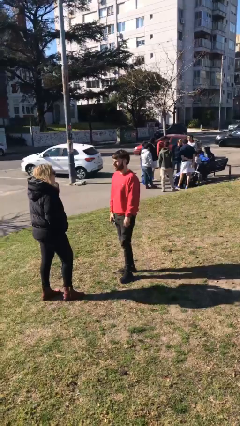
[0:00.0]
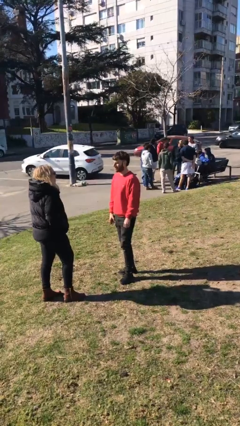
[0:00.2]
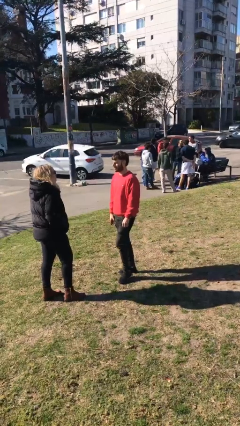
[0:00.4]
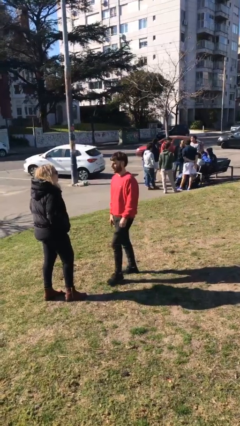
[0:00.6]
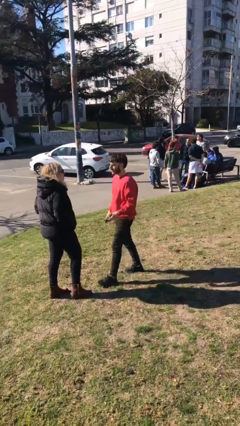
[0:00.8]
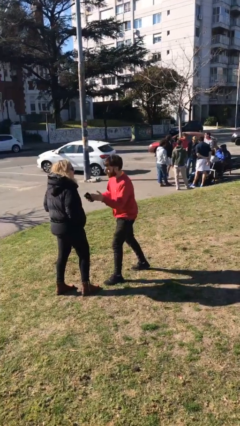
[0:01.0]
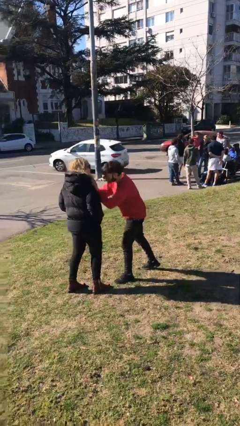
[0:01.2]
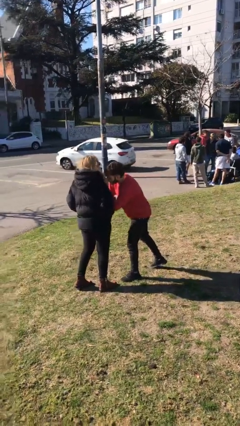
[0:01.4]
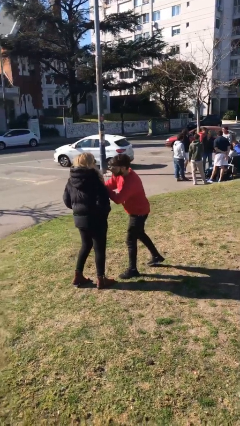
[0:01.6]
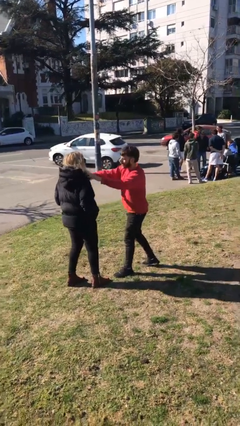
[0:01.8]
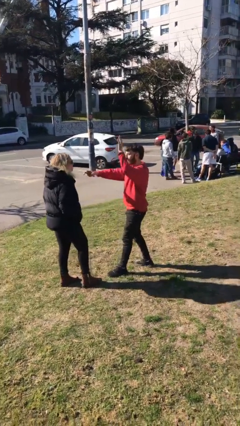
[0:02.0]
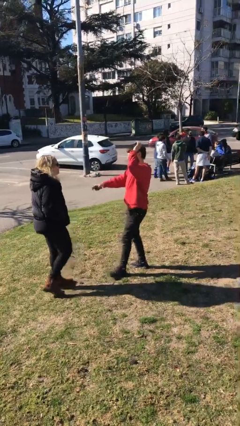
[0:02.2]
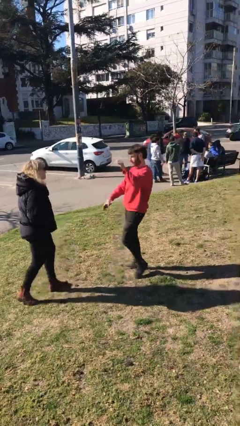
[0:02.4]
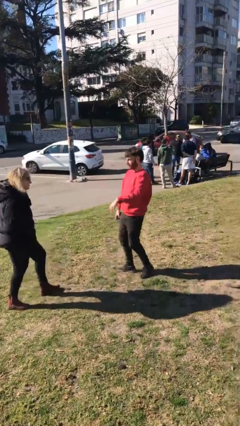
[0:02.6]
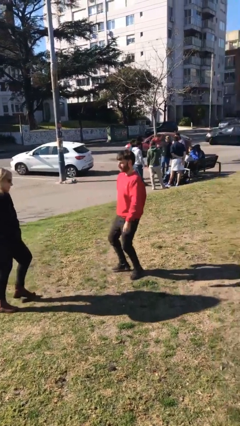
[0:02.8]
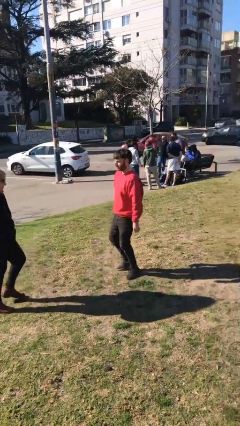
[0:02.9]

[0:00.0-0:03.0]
person shoves person

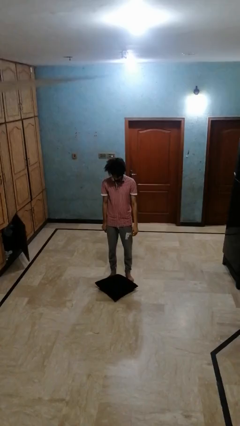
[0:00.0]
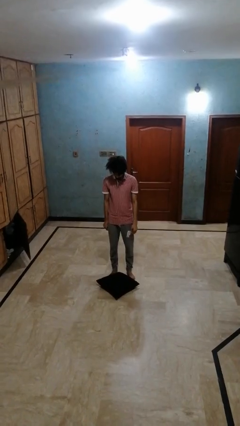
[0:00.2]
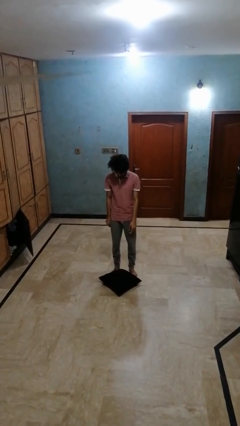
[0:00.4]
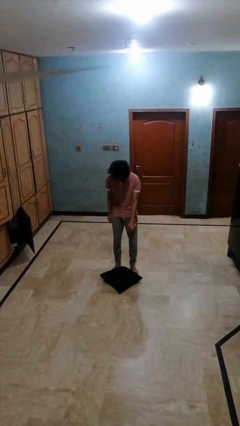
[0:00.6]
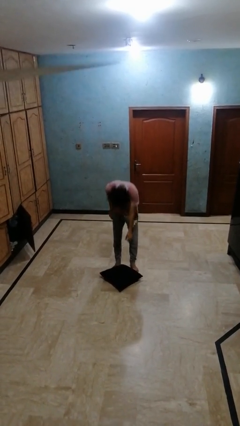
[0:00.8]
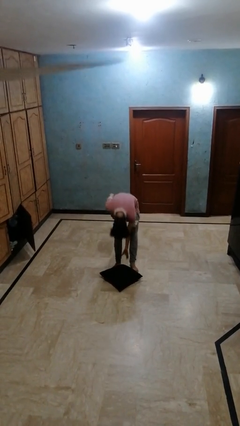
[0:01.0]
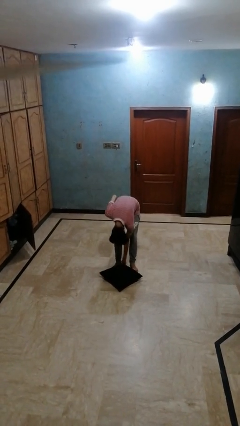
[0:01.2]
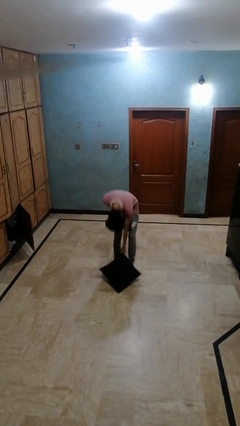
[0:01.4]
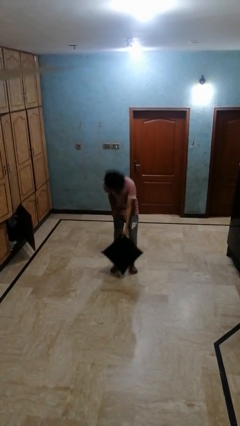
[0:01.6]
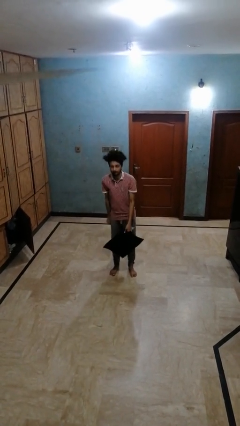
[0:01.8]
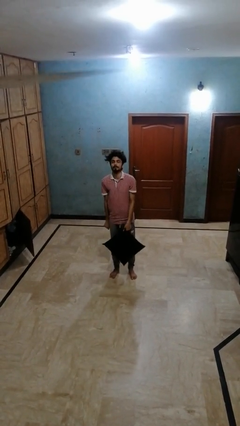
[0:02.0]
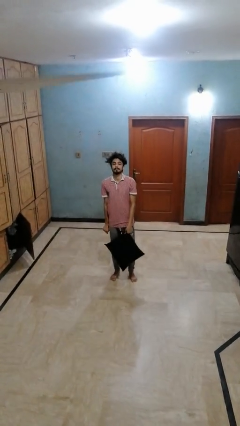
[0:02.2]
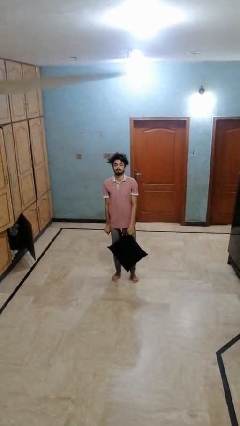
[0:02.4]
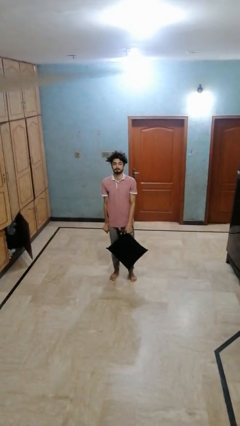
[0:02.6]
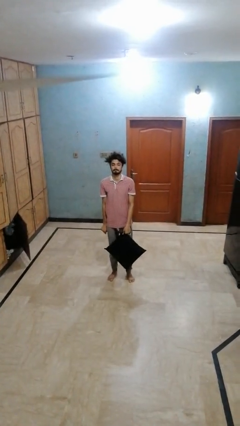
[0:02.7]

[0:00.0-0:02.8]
person picks up object from floor

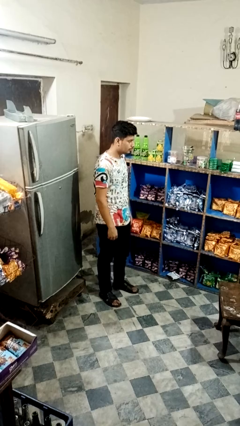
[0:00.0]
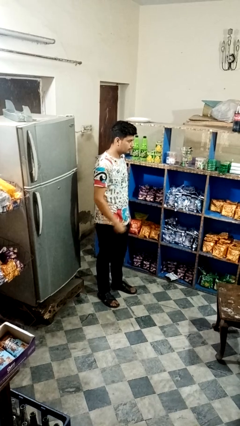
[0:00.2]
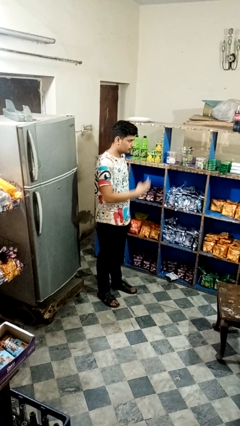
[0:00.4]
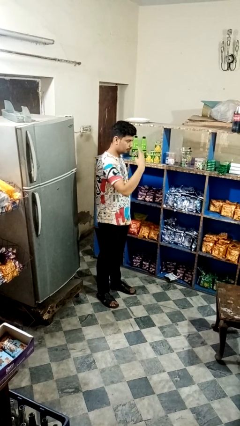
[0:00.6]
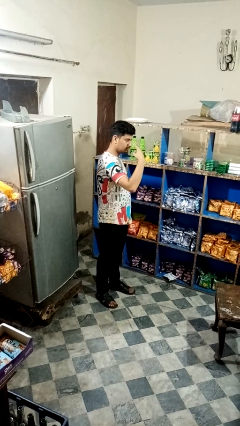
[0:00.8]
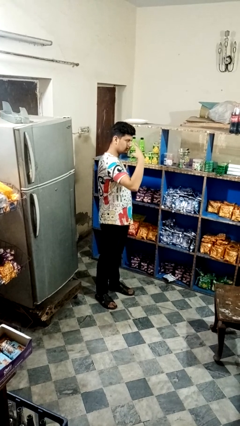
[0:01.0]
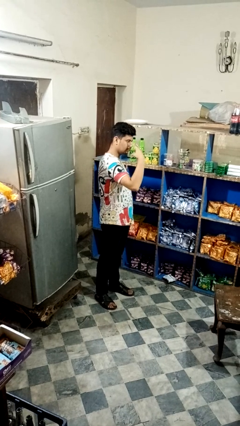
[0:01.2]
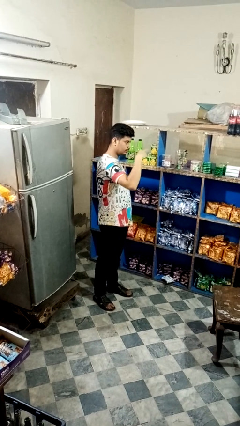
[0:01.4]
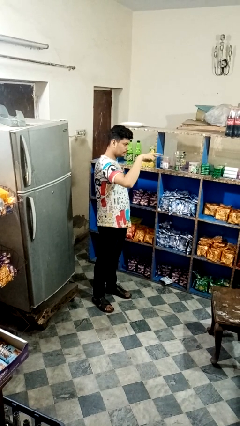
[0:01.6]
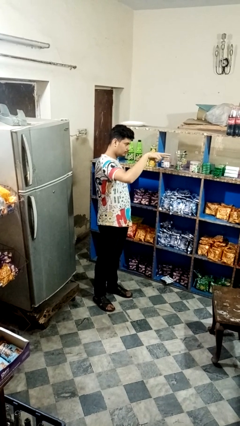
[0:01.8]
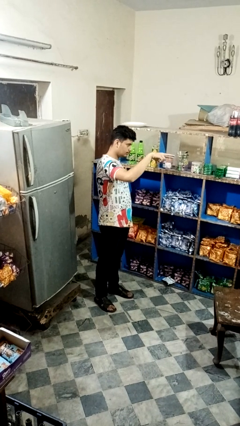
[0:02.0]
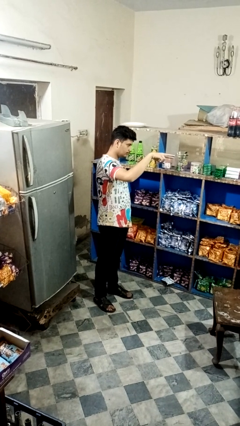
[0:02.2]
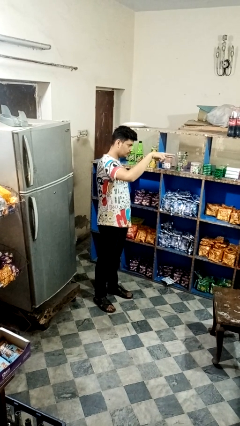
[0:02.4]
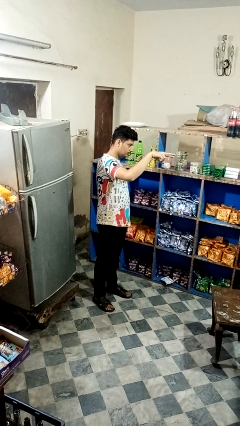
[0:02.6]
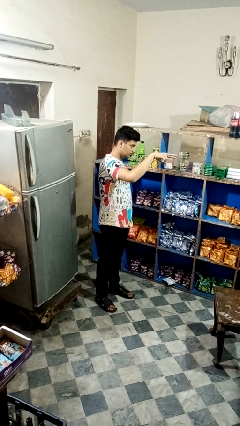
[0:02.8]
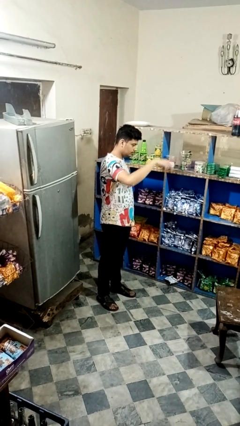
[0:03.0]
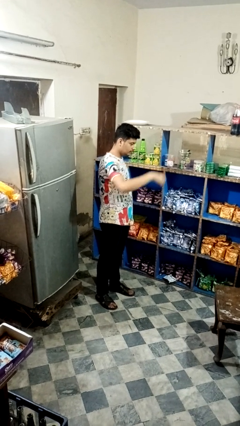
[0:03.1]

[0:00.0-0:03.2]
person gestures watch closely

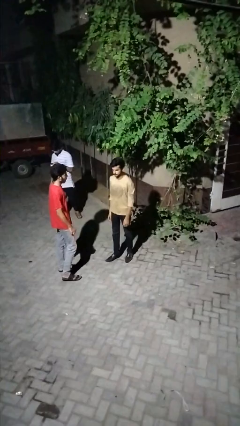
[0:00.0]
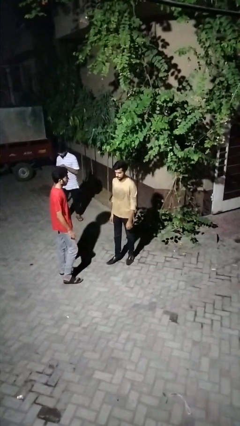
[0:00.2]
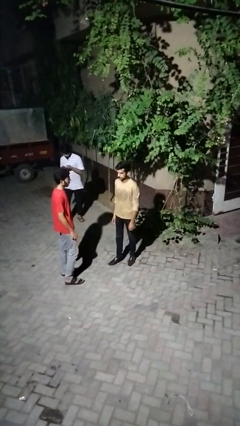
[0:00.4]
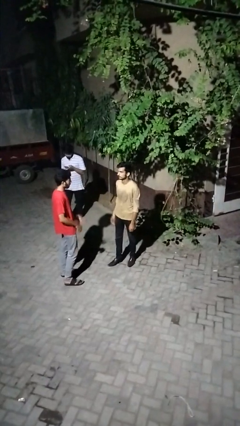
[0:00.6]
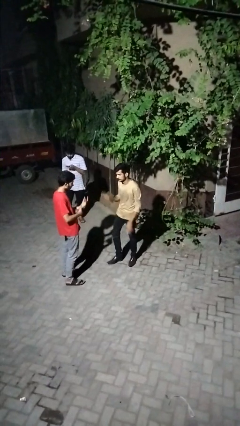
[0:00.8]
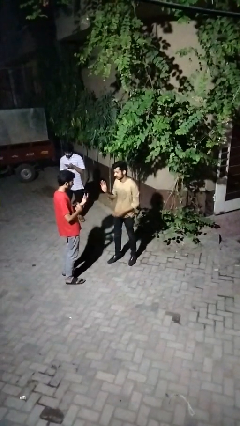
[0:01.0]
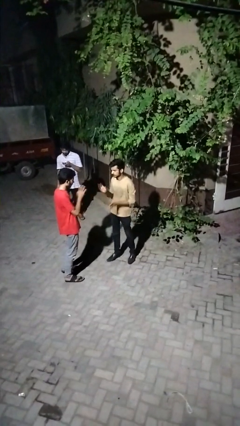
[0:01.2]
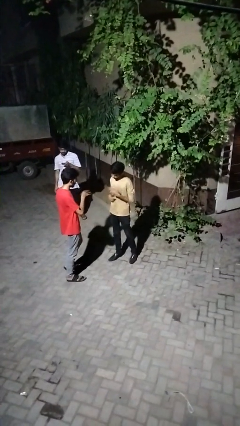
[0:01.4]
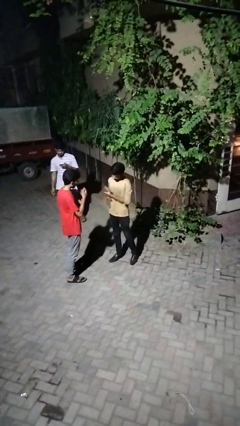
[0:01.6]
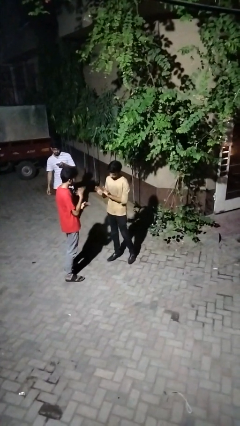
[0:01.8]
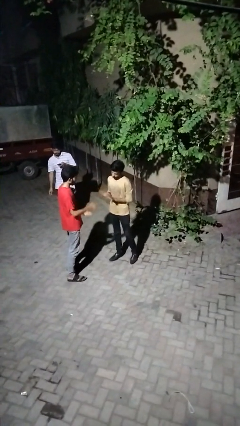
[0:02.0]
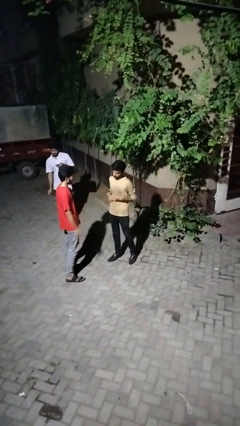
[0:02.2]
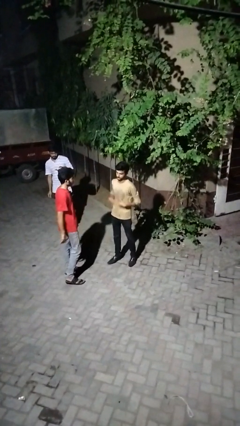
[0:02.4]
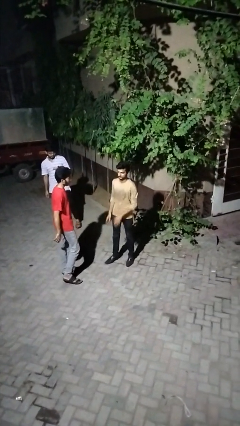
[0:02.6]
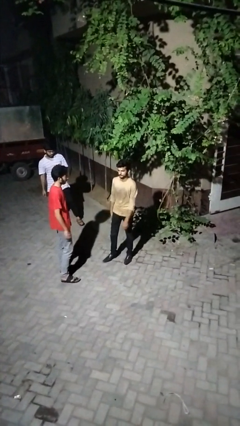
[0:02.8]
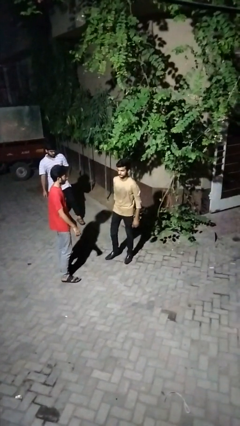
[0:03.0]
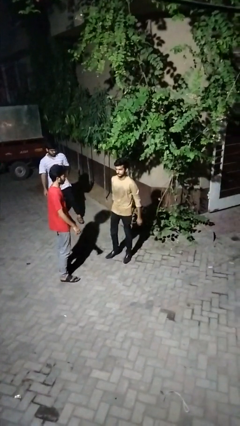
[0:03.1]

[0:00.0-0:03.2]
person talks to person

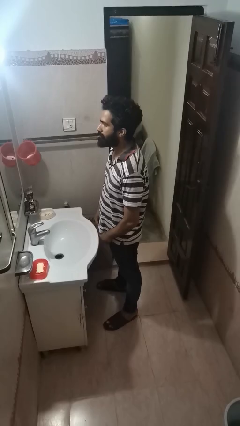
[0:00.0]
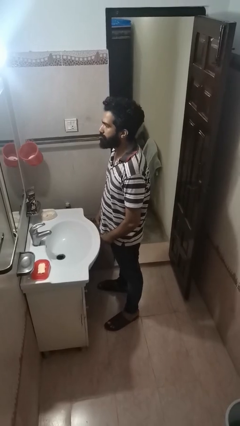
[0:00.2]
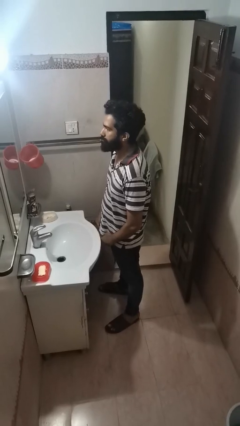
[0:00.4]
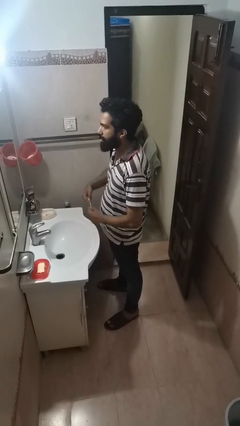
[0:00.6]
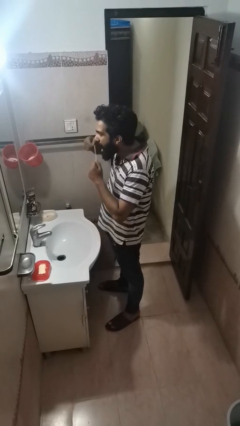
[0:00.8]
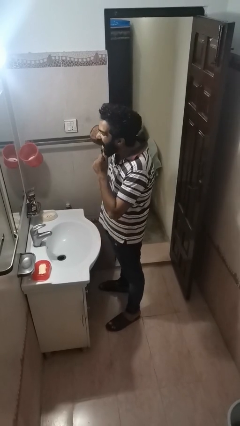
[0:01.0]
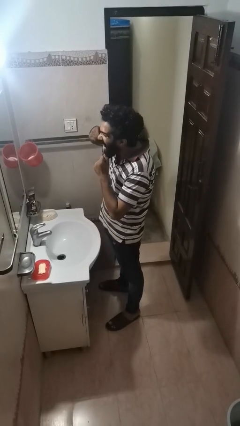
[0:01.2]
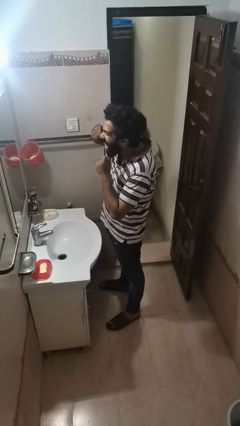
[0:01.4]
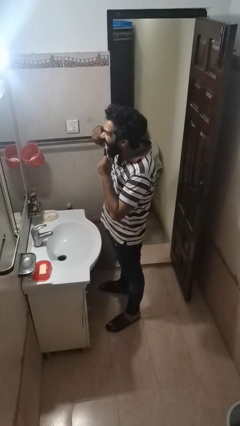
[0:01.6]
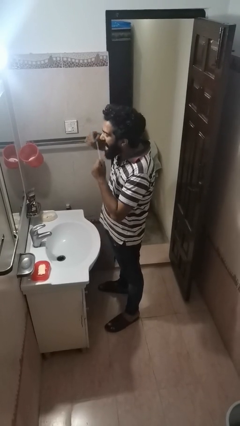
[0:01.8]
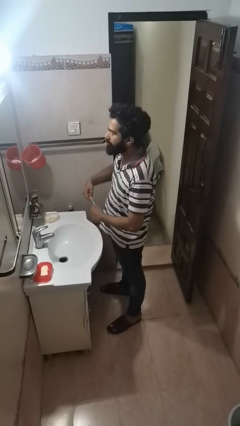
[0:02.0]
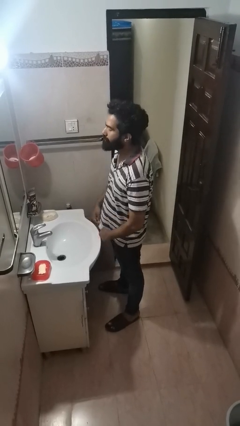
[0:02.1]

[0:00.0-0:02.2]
person flosses

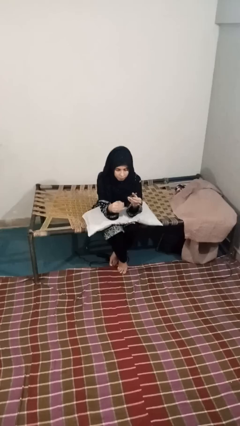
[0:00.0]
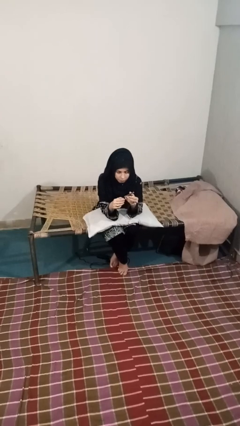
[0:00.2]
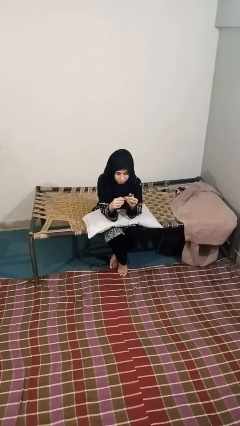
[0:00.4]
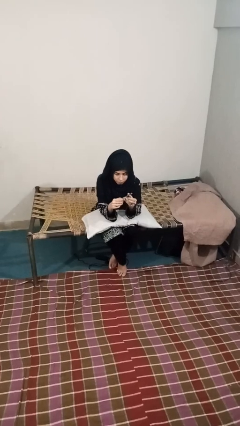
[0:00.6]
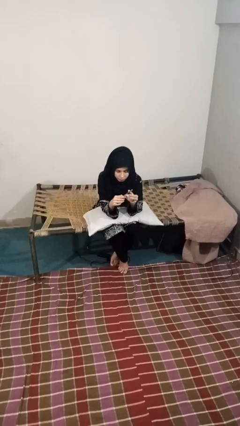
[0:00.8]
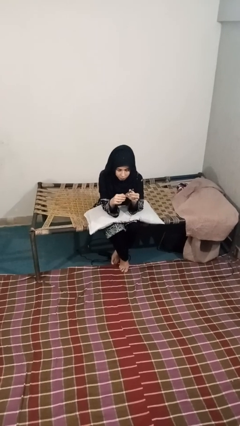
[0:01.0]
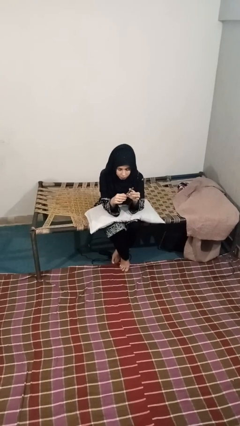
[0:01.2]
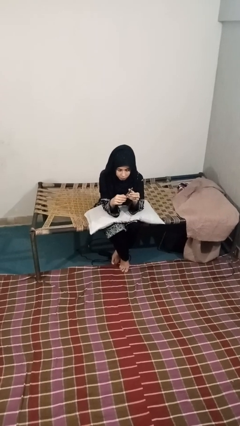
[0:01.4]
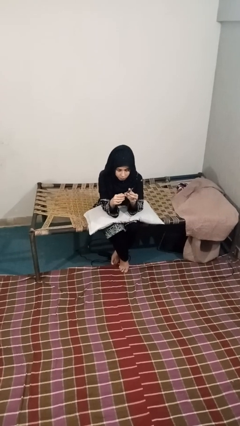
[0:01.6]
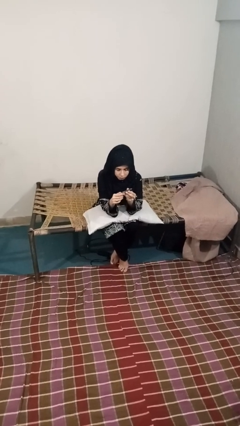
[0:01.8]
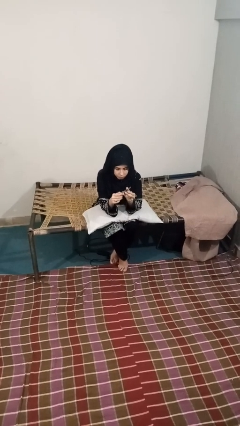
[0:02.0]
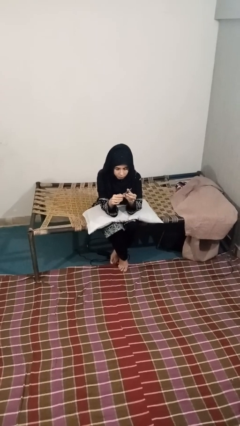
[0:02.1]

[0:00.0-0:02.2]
person clips fingernails

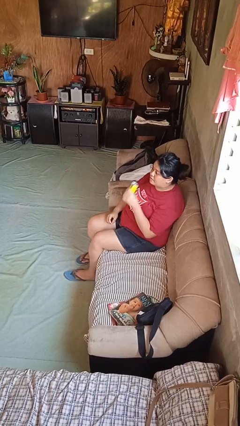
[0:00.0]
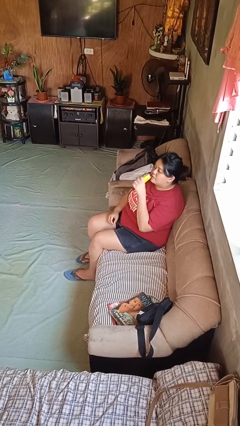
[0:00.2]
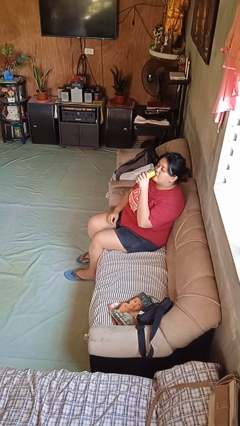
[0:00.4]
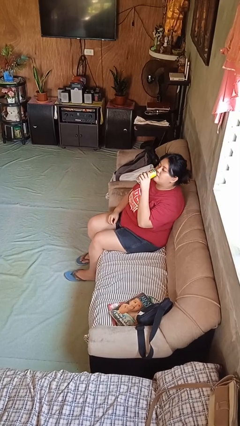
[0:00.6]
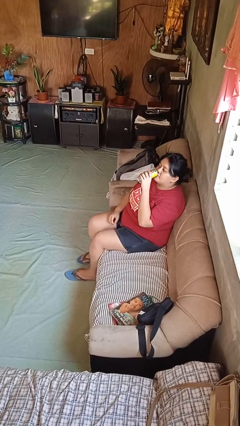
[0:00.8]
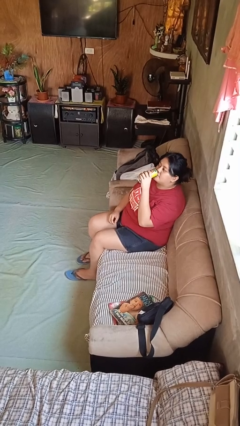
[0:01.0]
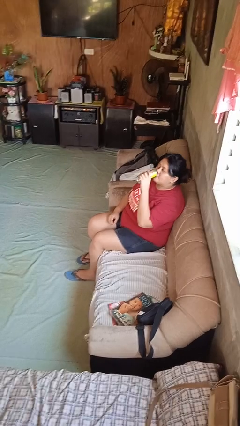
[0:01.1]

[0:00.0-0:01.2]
person drinks from beverage can
